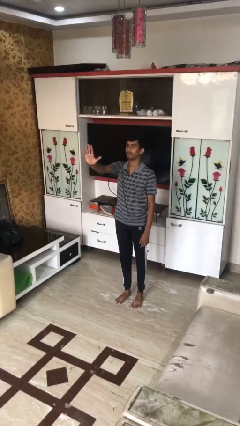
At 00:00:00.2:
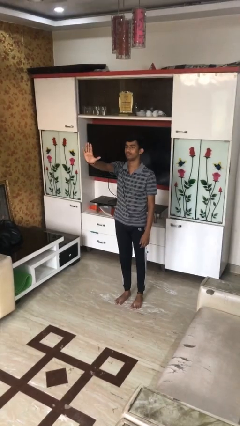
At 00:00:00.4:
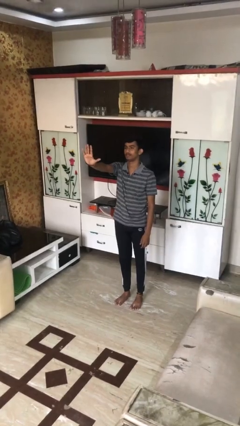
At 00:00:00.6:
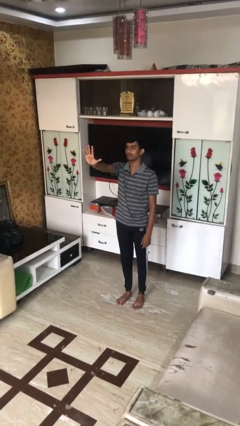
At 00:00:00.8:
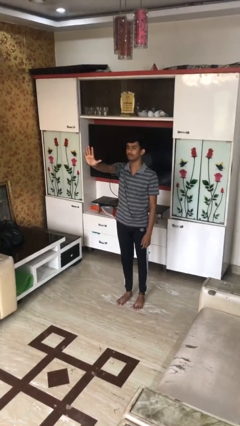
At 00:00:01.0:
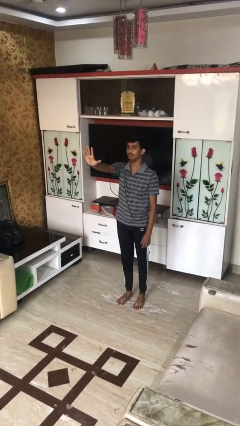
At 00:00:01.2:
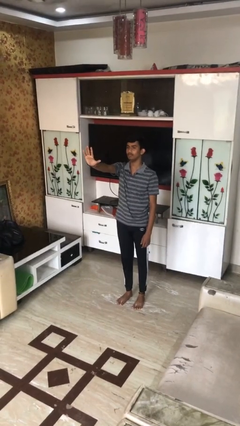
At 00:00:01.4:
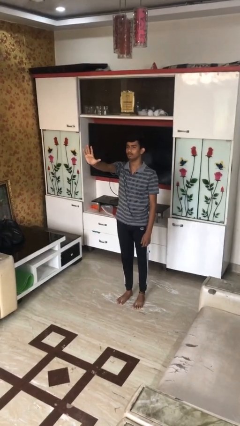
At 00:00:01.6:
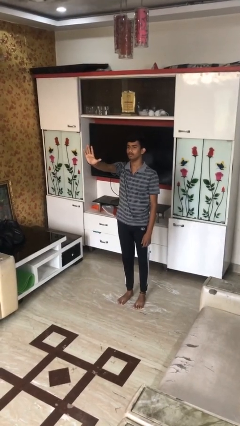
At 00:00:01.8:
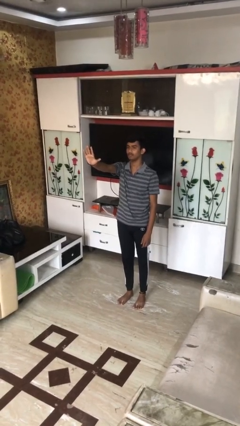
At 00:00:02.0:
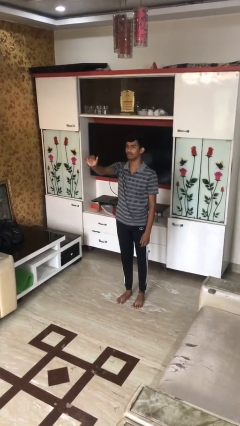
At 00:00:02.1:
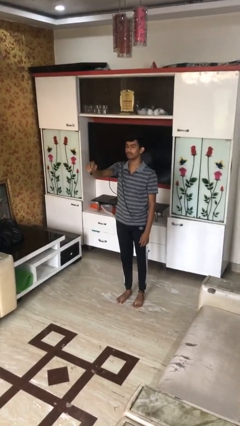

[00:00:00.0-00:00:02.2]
person gestures number five

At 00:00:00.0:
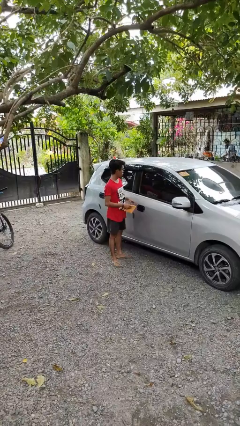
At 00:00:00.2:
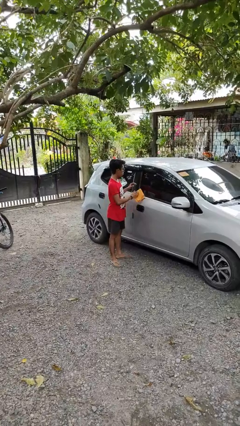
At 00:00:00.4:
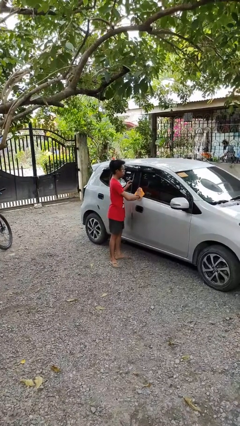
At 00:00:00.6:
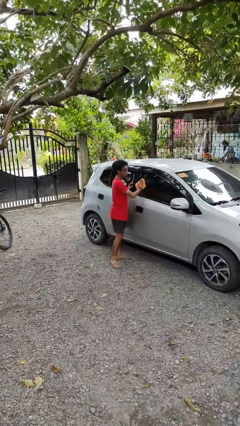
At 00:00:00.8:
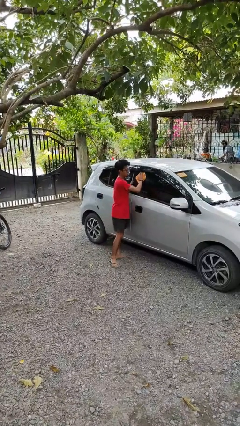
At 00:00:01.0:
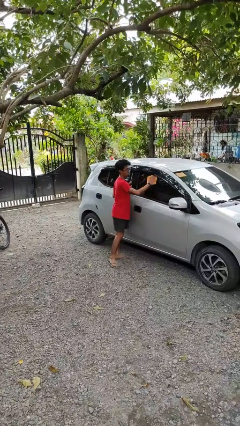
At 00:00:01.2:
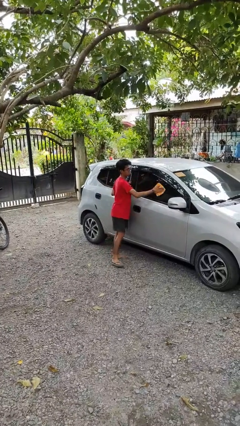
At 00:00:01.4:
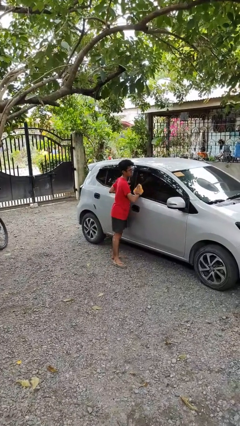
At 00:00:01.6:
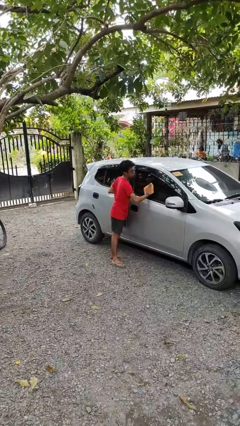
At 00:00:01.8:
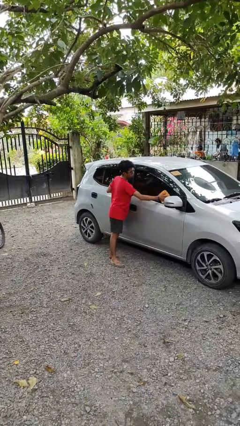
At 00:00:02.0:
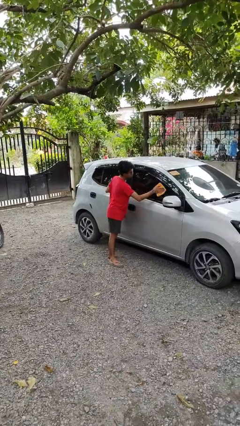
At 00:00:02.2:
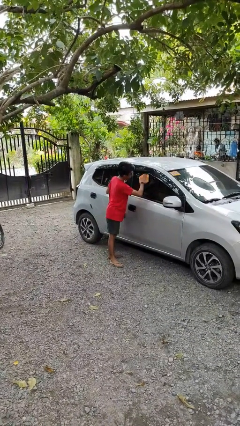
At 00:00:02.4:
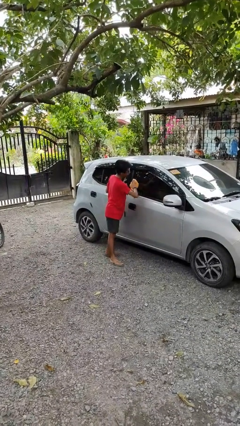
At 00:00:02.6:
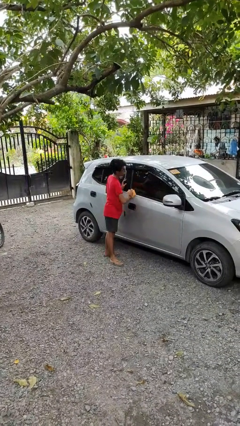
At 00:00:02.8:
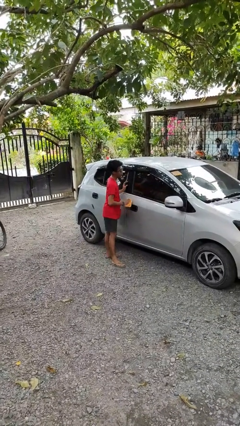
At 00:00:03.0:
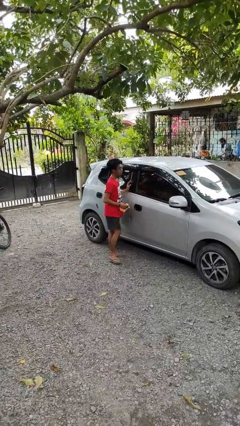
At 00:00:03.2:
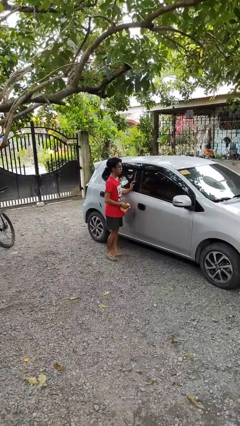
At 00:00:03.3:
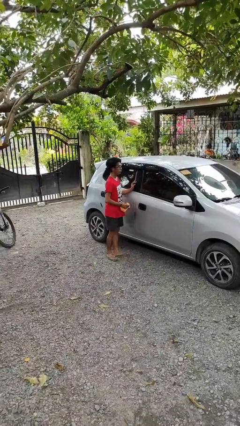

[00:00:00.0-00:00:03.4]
person polishes car with rag

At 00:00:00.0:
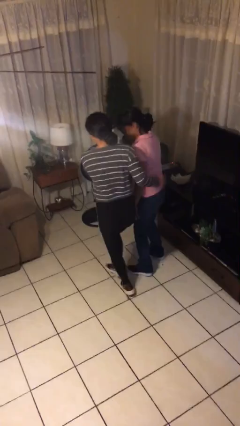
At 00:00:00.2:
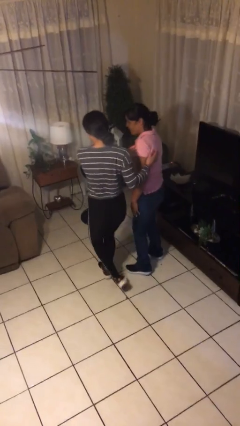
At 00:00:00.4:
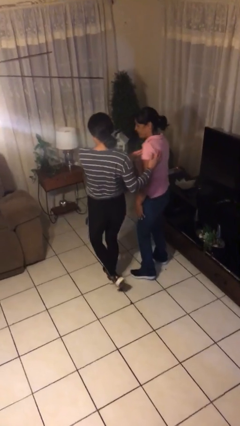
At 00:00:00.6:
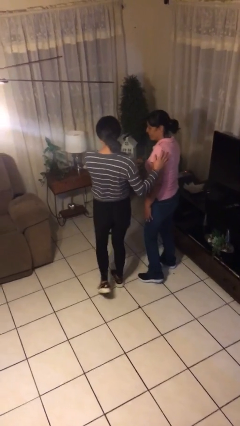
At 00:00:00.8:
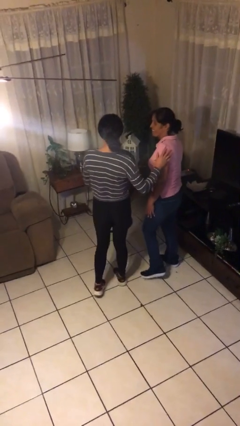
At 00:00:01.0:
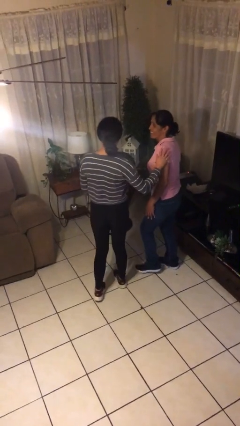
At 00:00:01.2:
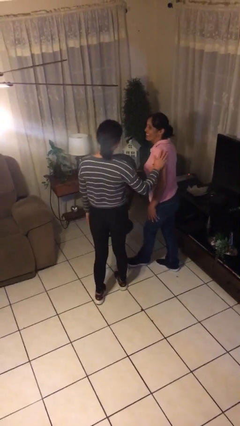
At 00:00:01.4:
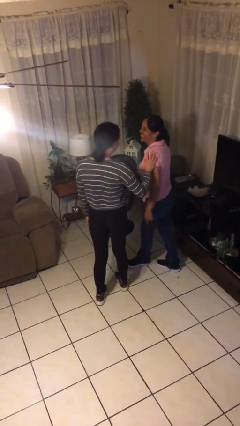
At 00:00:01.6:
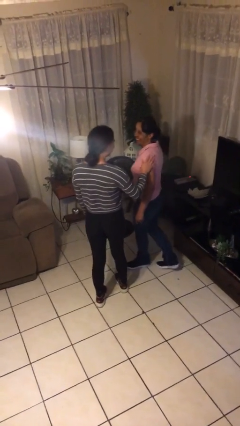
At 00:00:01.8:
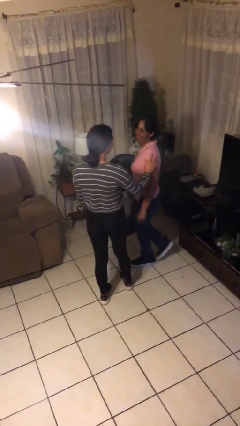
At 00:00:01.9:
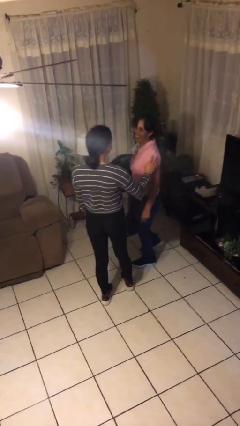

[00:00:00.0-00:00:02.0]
person bumps into person

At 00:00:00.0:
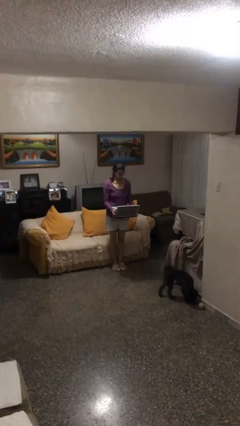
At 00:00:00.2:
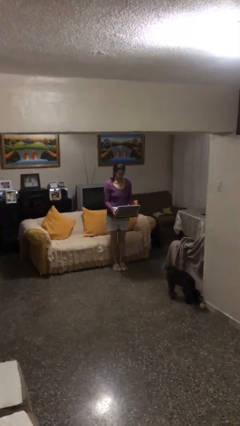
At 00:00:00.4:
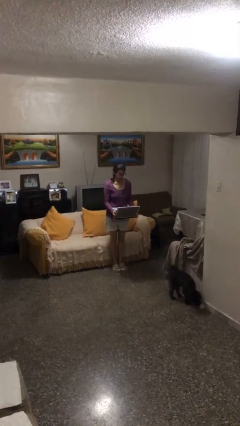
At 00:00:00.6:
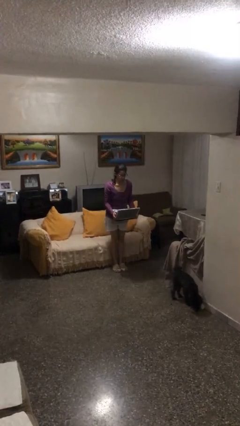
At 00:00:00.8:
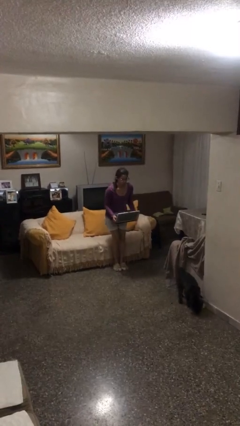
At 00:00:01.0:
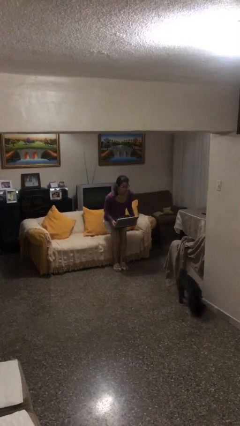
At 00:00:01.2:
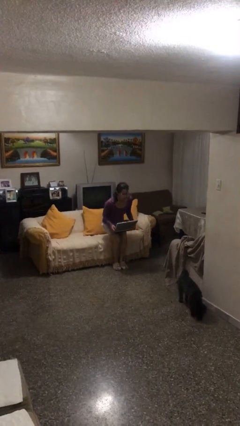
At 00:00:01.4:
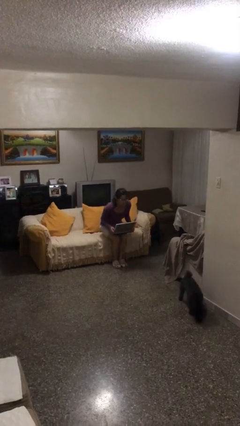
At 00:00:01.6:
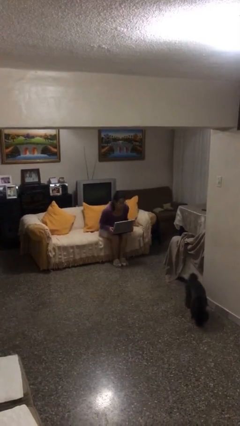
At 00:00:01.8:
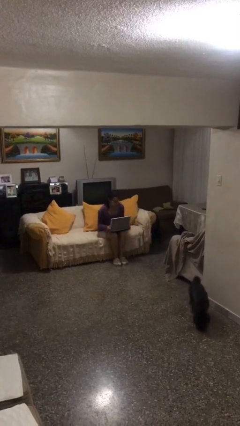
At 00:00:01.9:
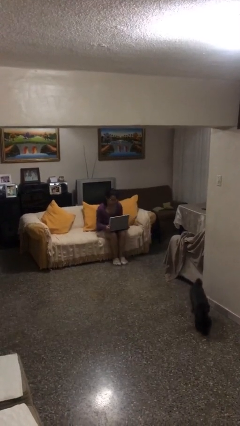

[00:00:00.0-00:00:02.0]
person sits down

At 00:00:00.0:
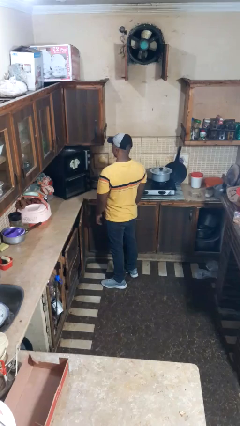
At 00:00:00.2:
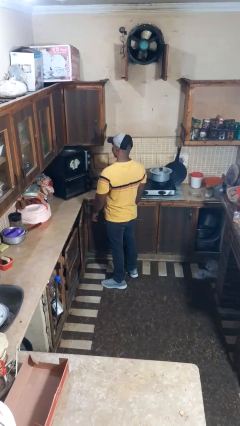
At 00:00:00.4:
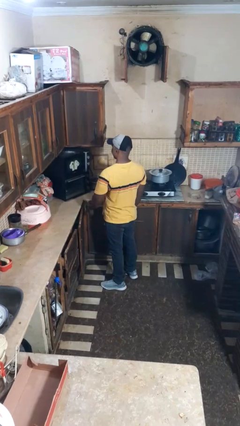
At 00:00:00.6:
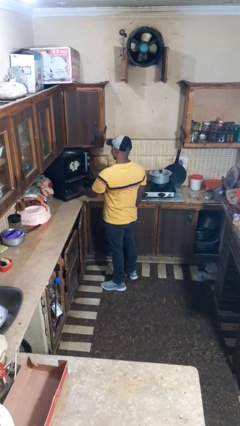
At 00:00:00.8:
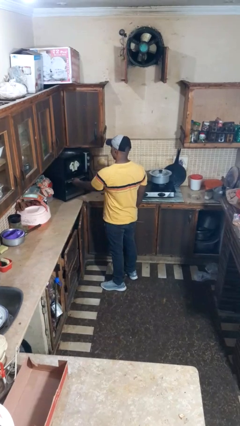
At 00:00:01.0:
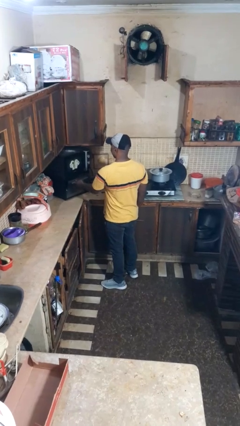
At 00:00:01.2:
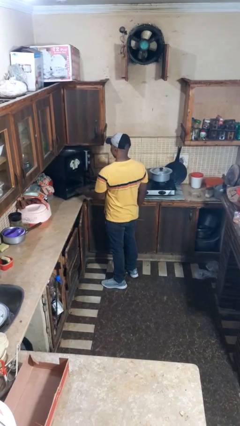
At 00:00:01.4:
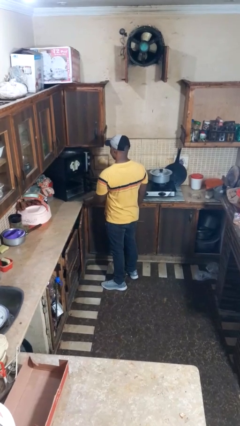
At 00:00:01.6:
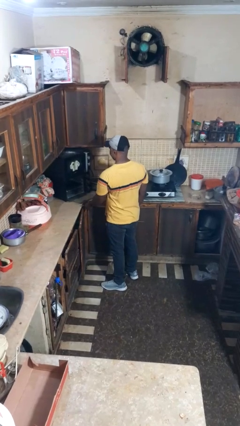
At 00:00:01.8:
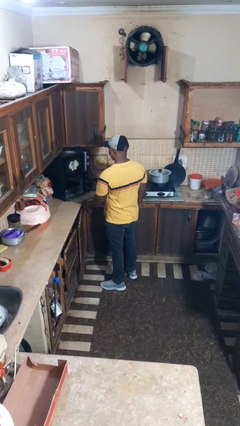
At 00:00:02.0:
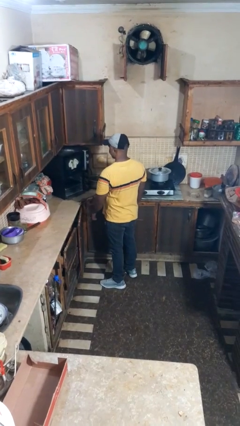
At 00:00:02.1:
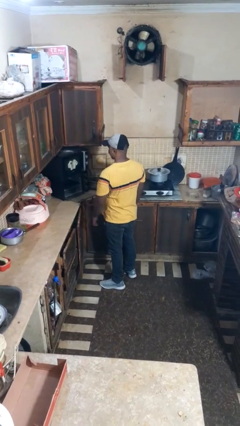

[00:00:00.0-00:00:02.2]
person opens oven door

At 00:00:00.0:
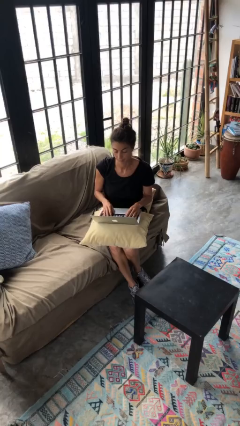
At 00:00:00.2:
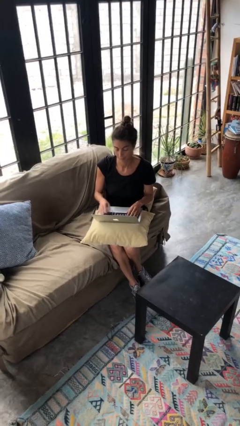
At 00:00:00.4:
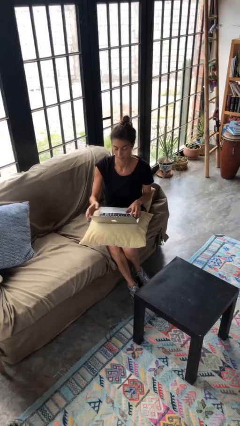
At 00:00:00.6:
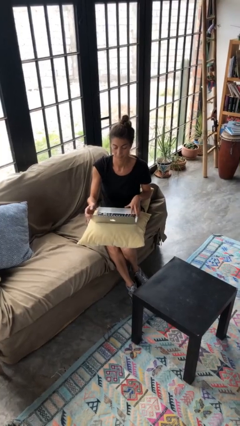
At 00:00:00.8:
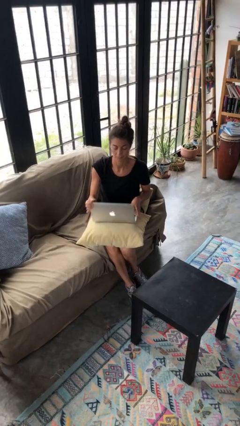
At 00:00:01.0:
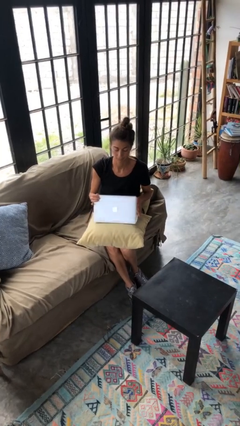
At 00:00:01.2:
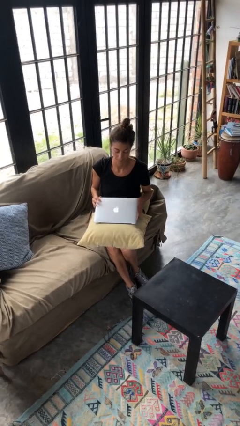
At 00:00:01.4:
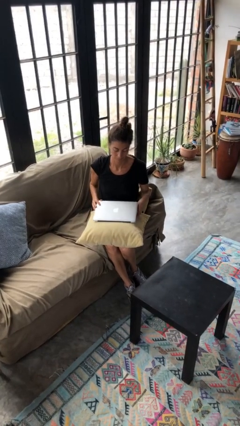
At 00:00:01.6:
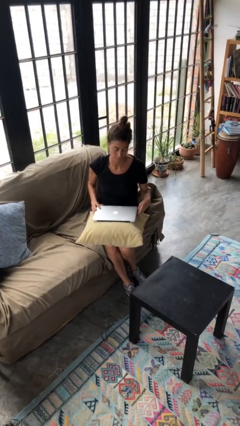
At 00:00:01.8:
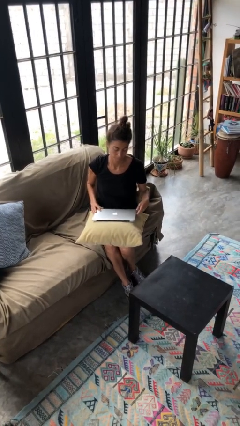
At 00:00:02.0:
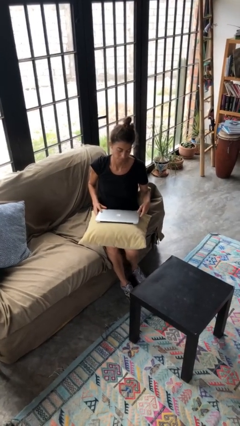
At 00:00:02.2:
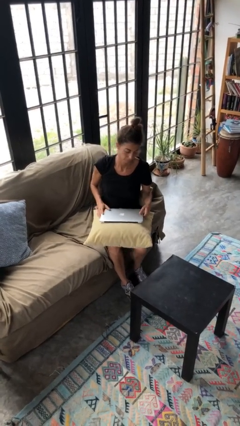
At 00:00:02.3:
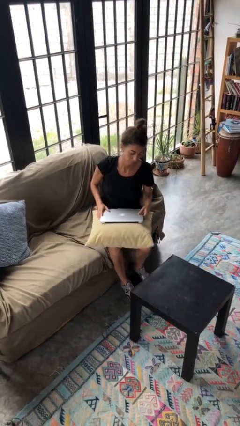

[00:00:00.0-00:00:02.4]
person closes laptop

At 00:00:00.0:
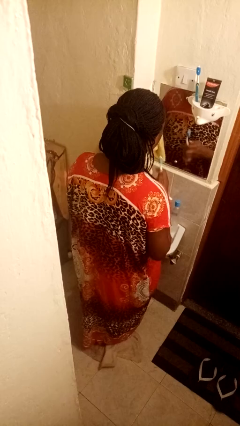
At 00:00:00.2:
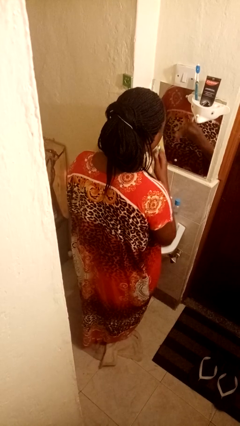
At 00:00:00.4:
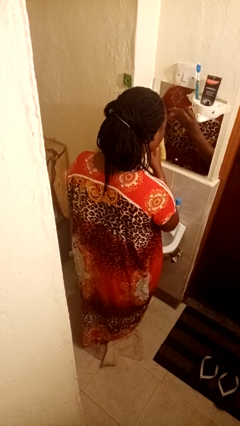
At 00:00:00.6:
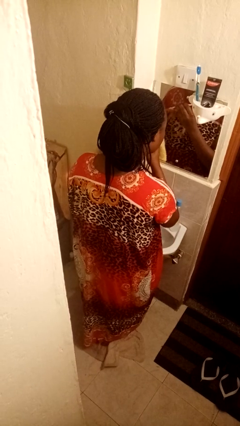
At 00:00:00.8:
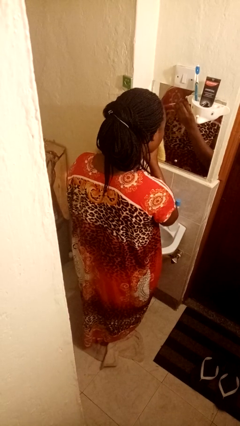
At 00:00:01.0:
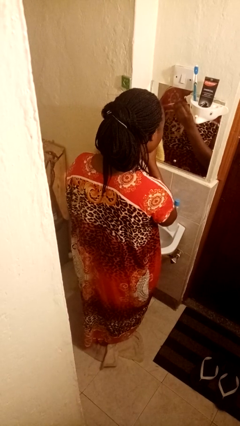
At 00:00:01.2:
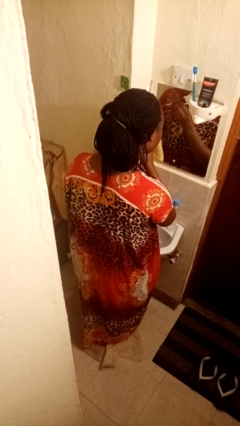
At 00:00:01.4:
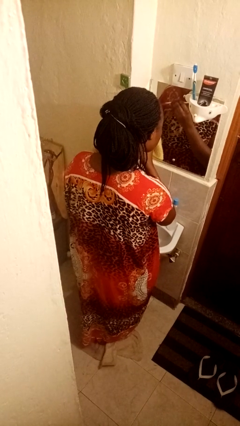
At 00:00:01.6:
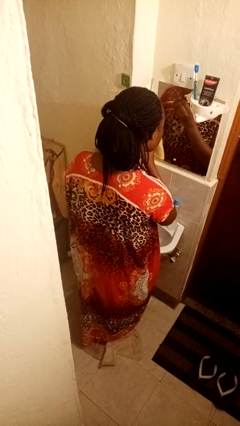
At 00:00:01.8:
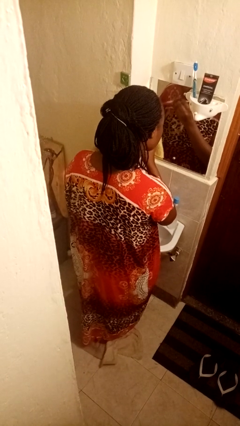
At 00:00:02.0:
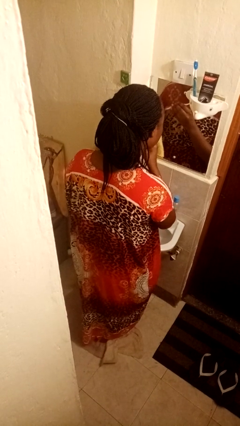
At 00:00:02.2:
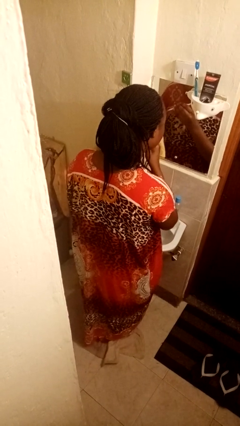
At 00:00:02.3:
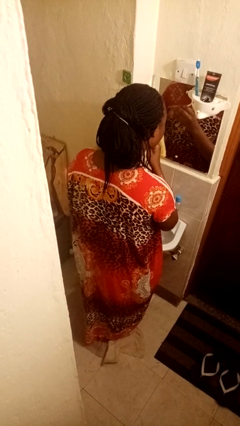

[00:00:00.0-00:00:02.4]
person brushes teeth

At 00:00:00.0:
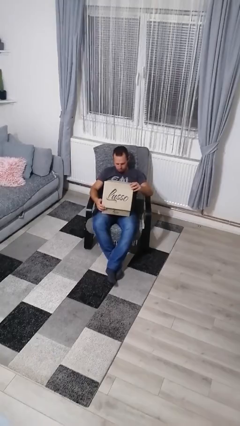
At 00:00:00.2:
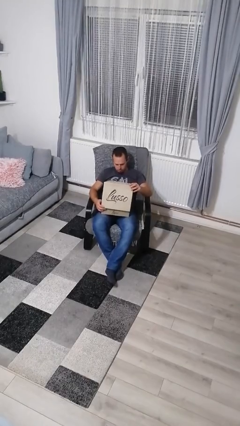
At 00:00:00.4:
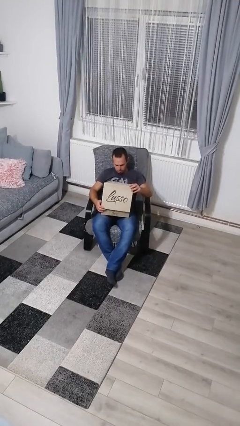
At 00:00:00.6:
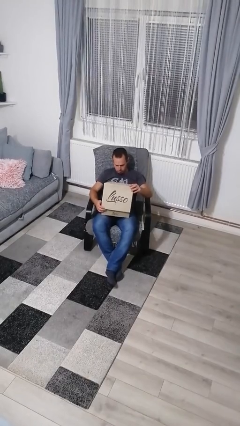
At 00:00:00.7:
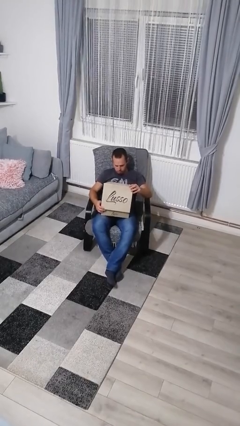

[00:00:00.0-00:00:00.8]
person opens box
